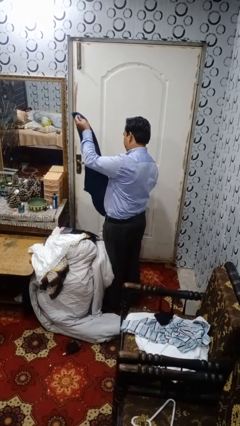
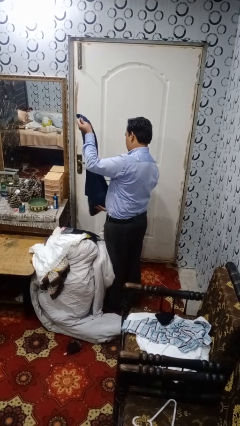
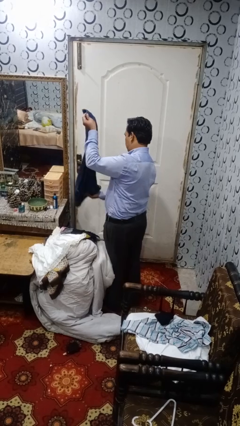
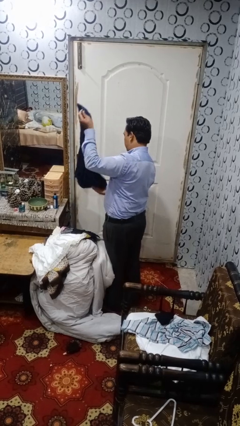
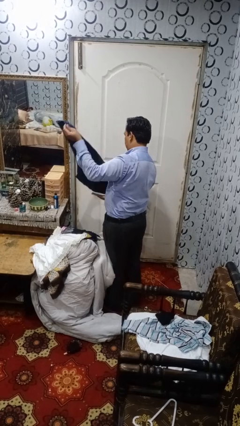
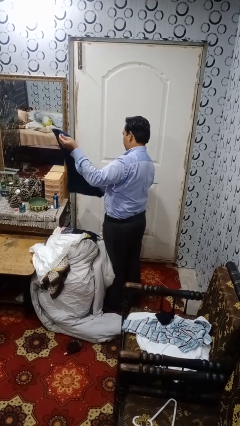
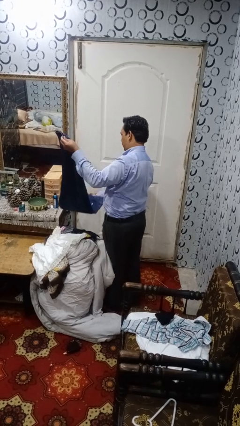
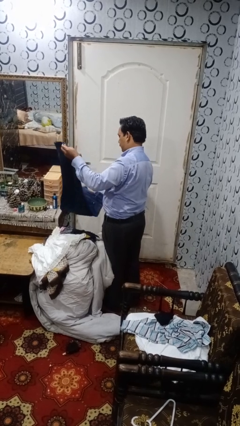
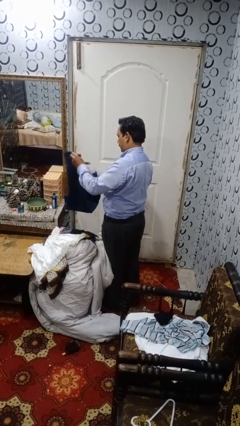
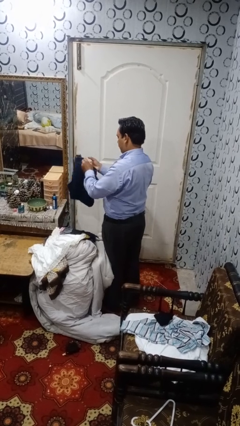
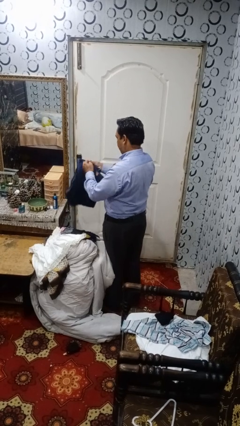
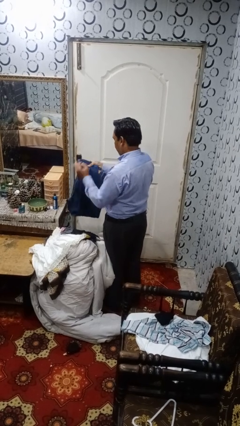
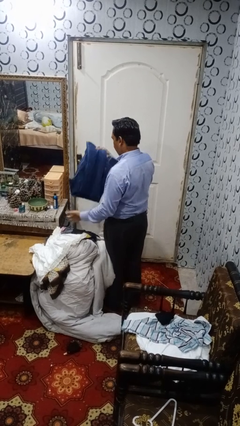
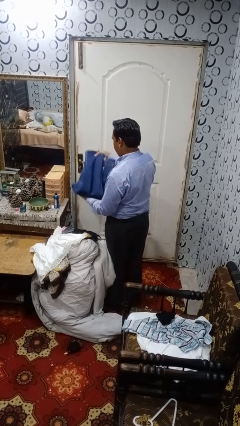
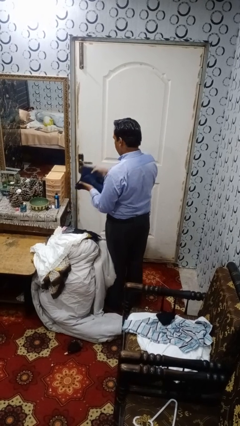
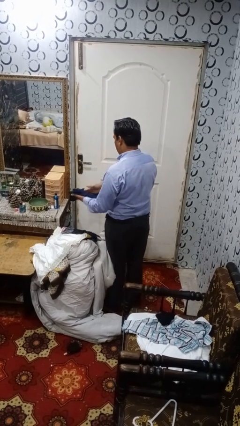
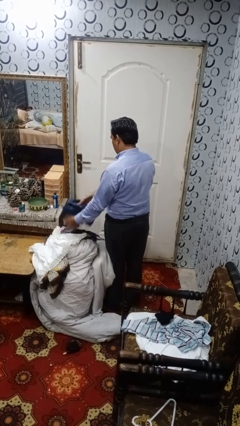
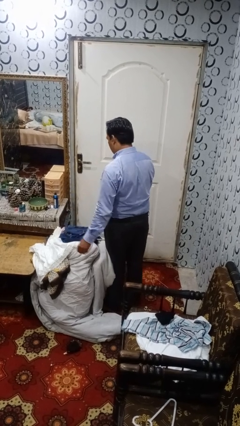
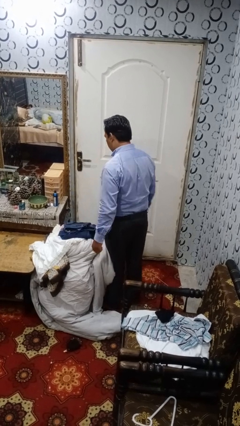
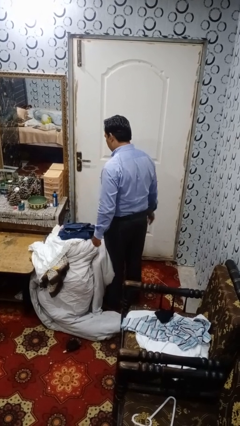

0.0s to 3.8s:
person folds pants

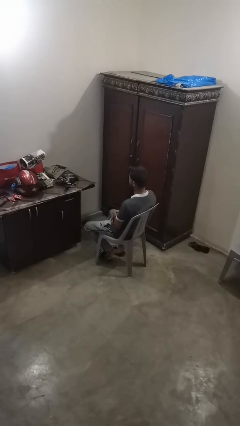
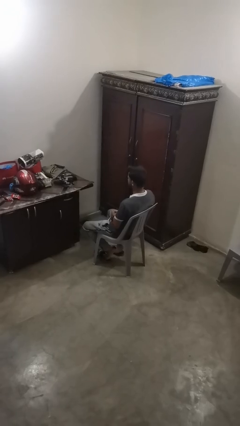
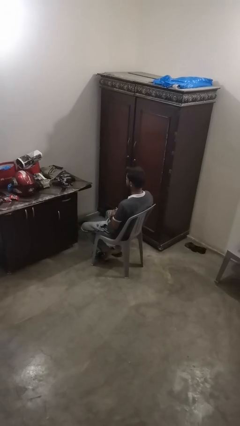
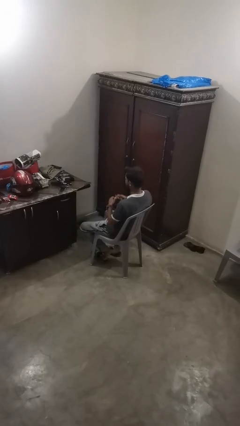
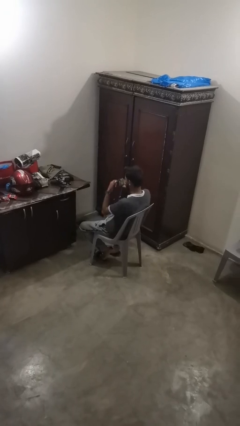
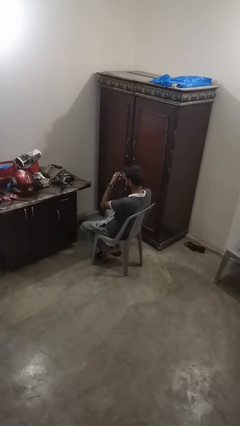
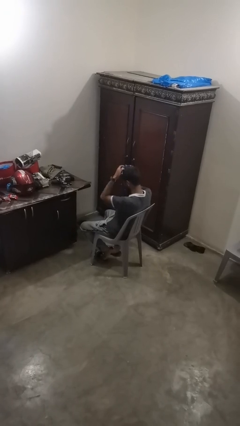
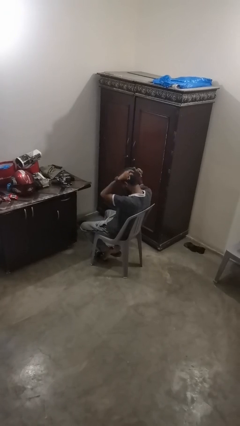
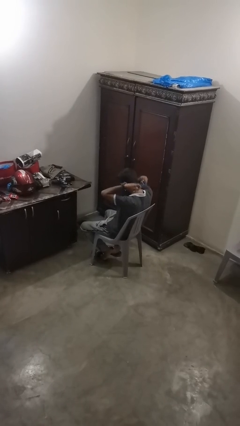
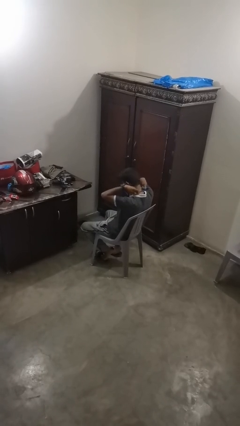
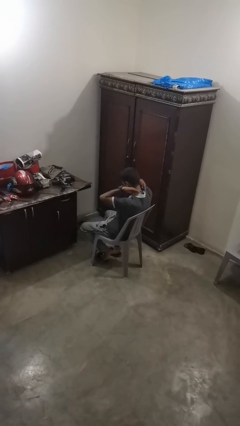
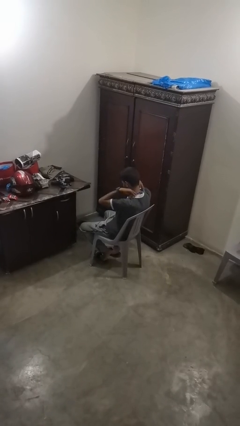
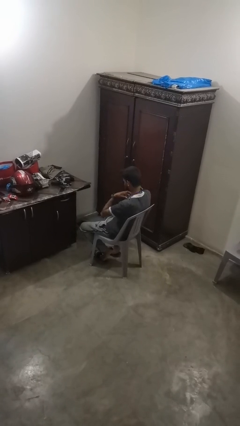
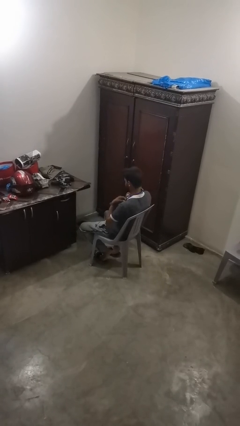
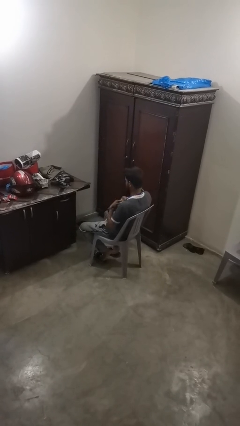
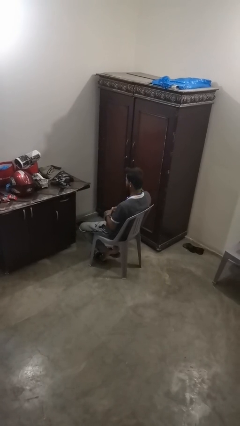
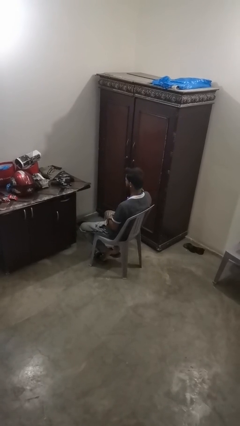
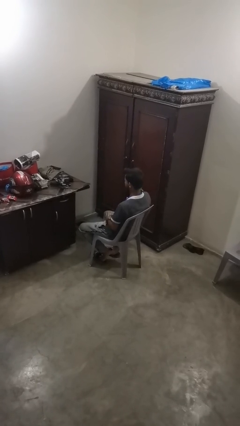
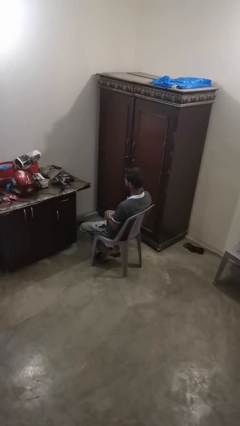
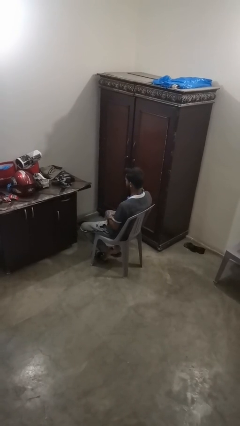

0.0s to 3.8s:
person puts on necklace

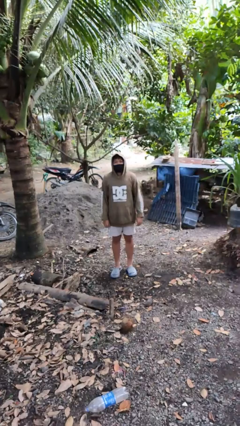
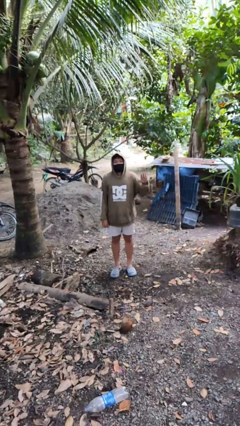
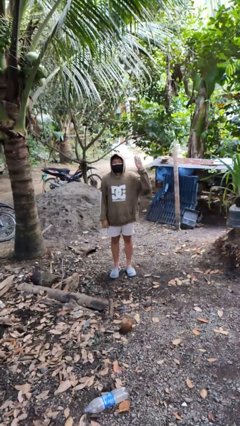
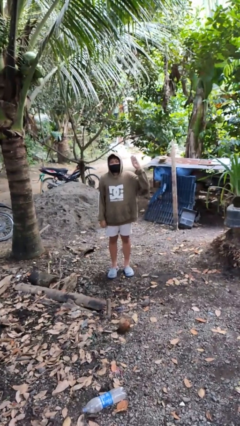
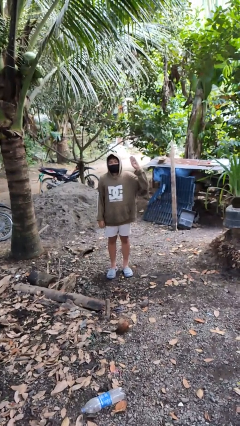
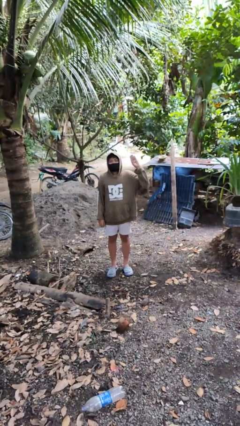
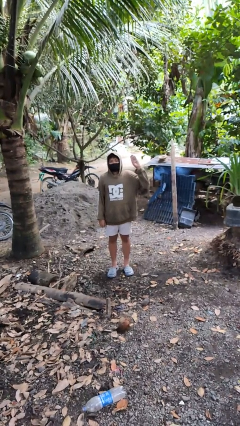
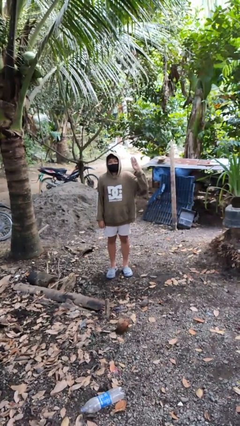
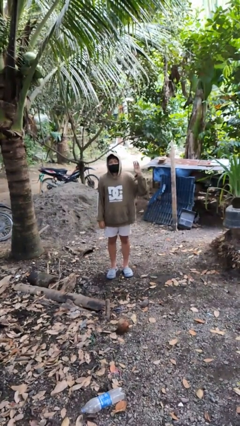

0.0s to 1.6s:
person gestures number four

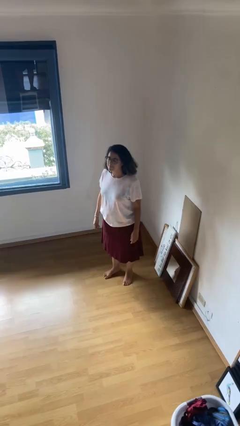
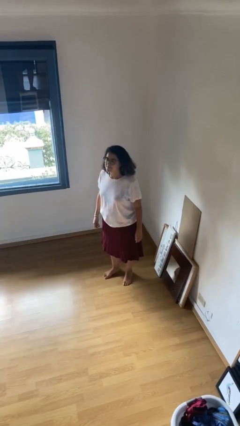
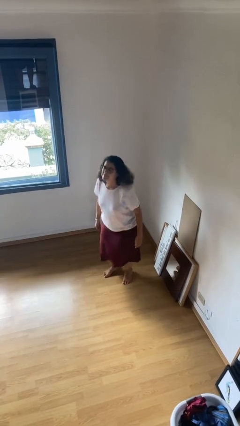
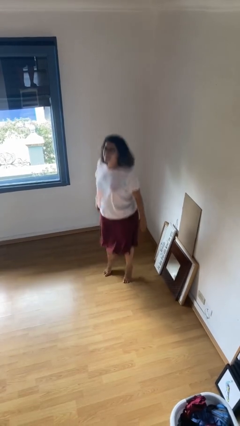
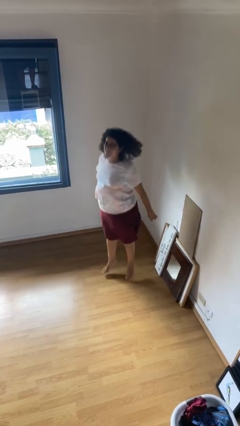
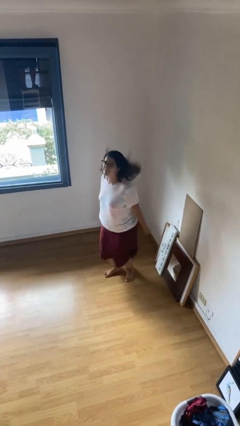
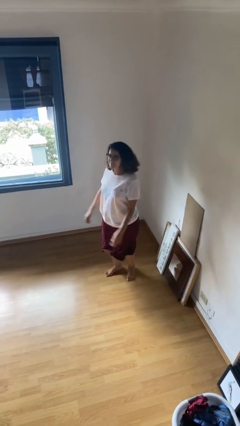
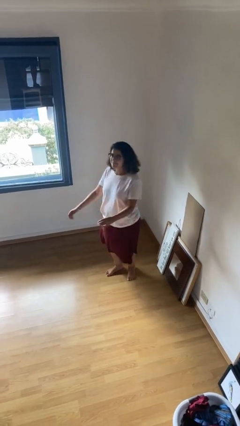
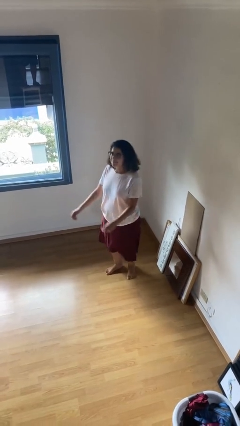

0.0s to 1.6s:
person jumps

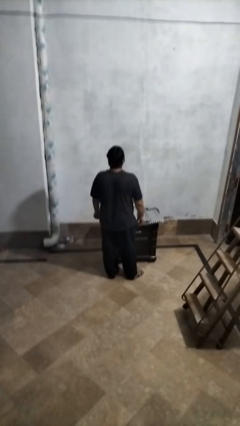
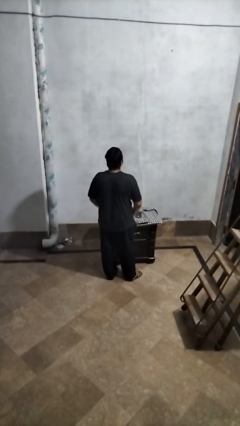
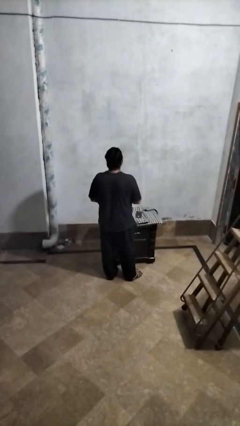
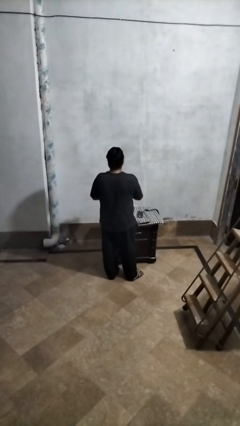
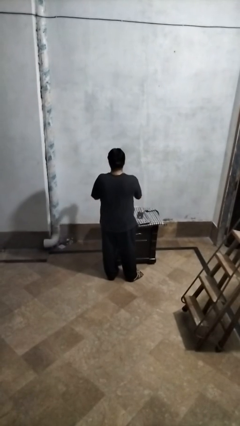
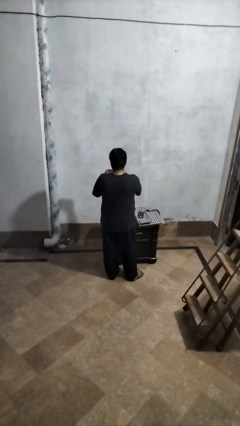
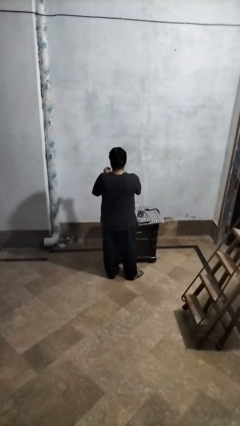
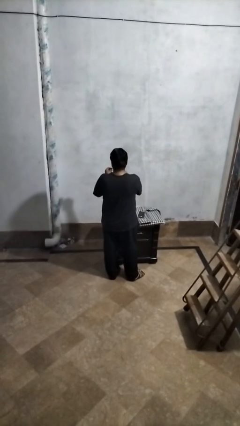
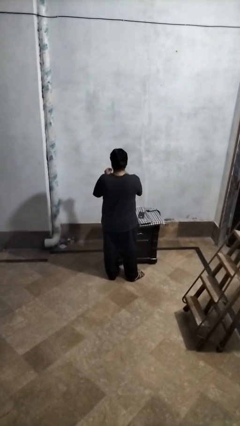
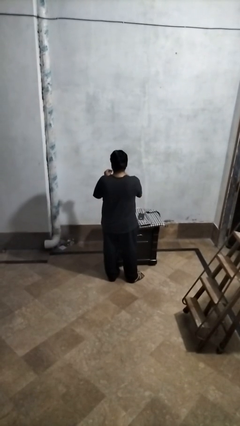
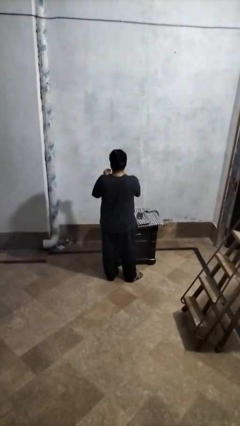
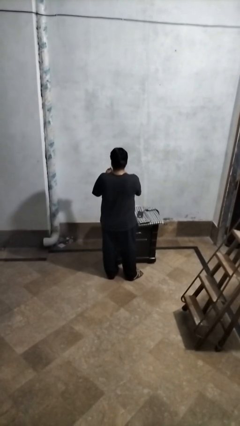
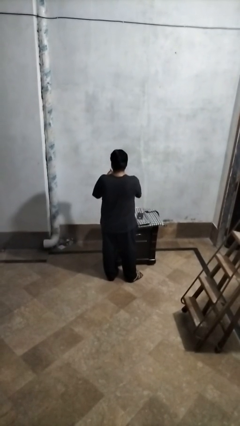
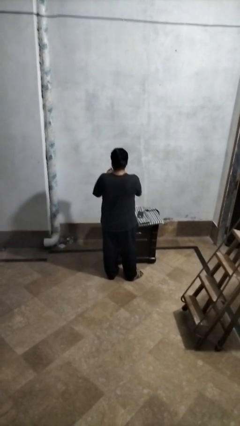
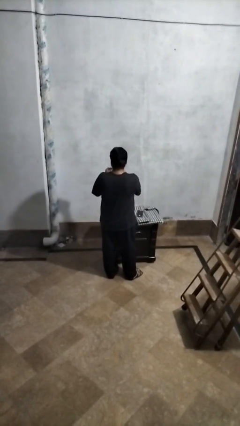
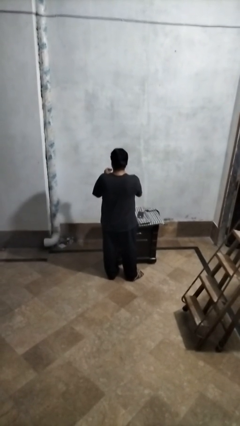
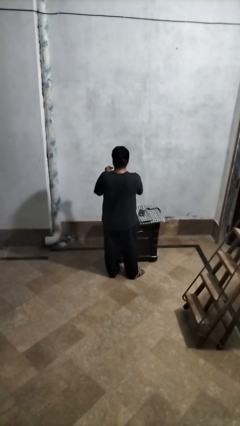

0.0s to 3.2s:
person files fingernails

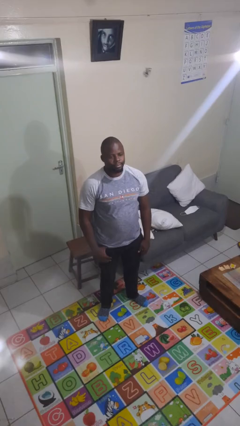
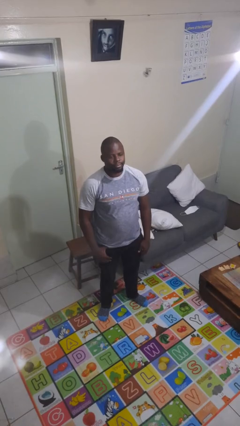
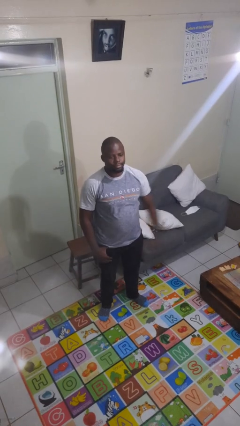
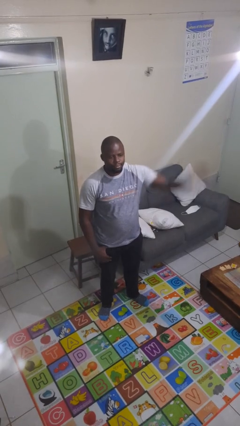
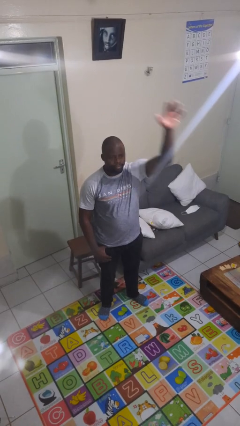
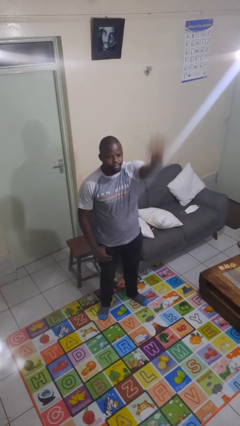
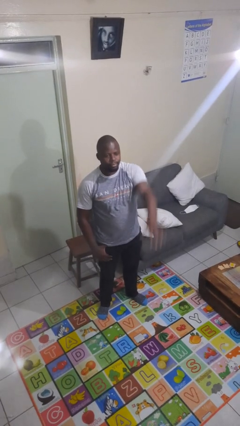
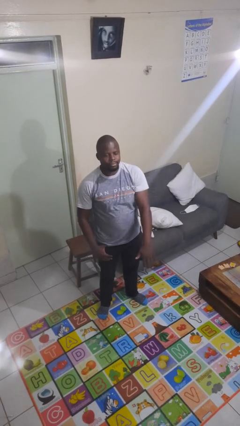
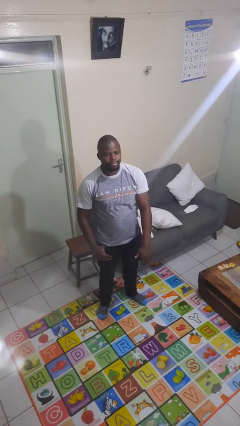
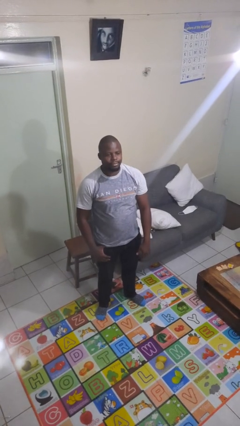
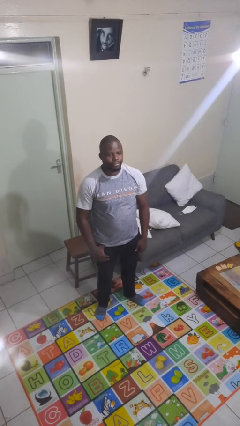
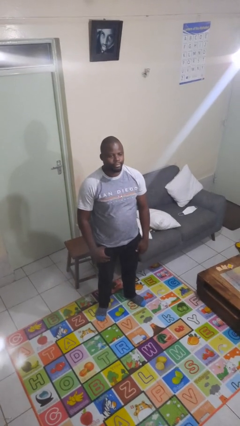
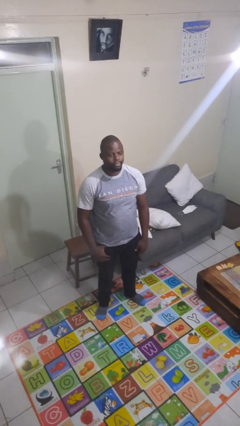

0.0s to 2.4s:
person gestures swipe down

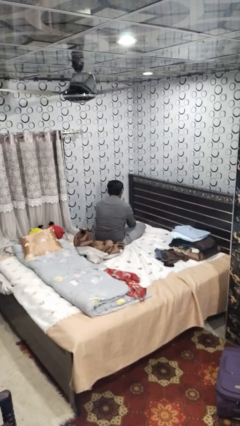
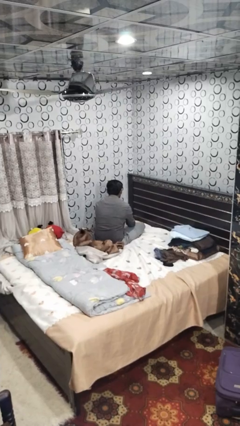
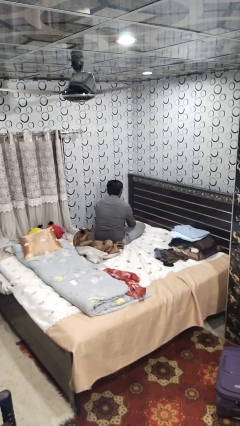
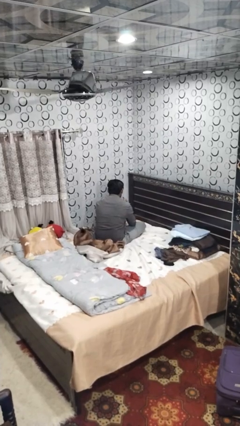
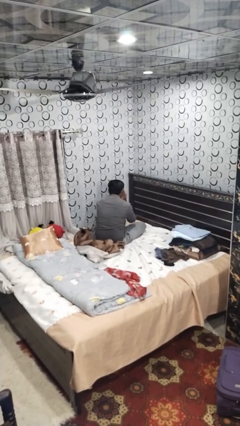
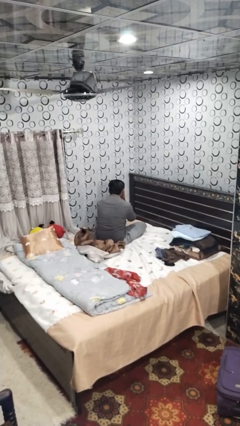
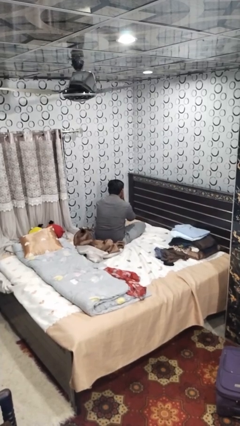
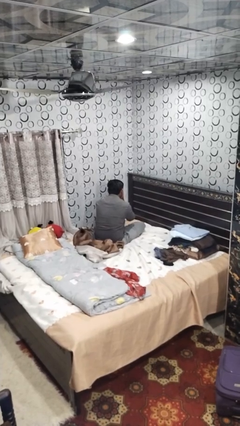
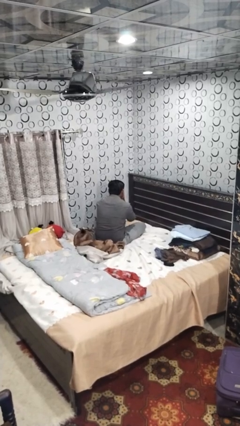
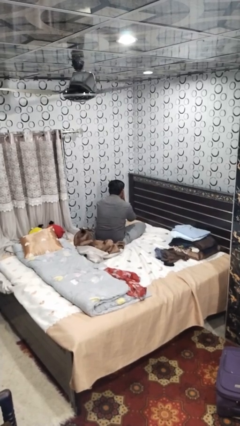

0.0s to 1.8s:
person covers face with hands
